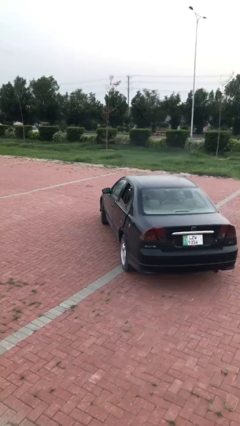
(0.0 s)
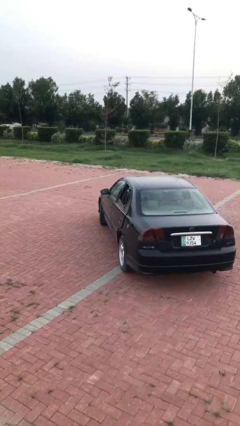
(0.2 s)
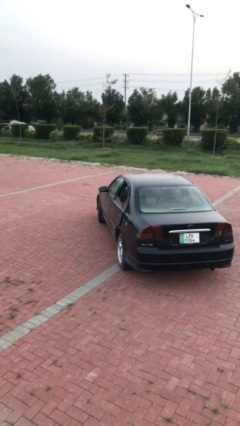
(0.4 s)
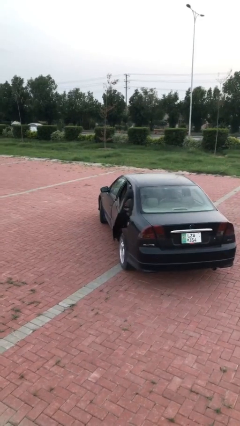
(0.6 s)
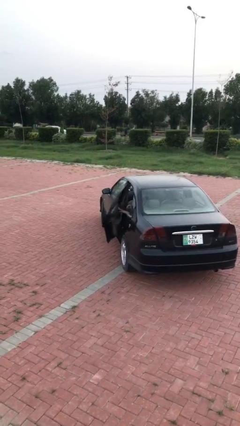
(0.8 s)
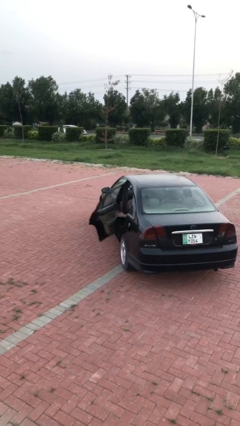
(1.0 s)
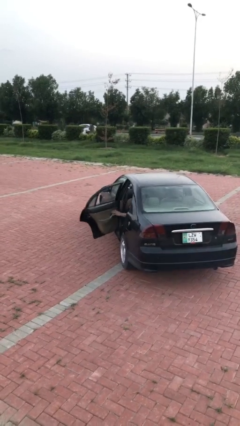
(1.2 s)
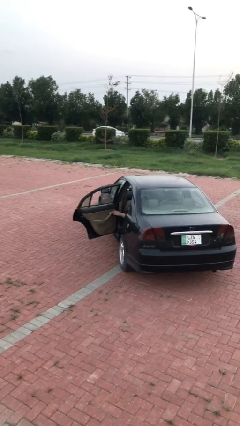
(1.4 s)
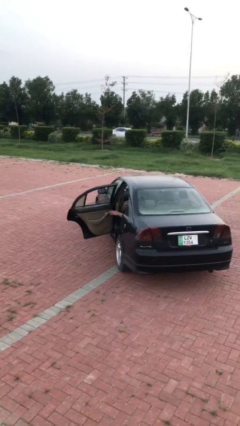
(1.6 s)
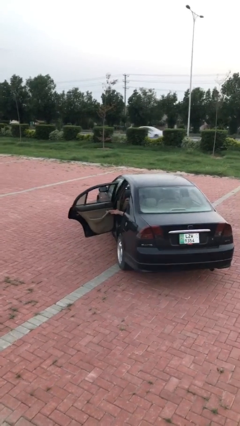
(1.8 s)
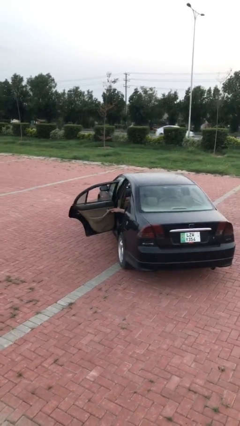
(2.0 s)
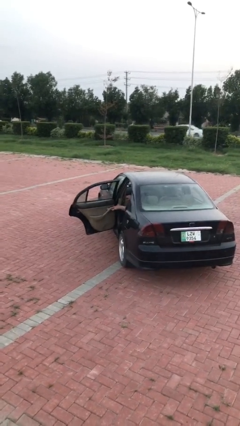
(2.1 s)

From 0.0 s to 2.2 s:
person opens car door

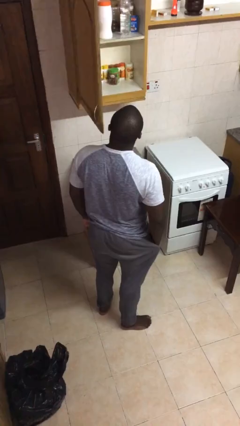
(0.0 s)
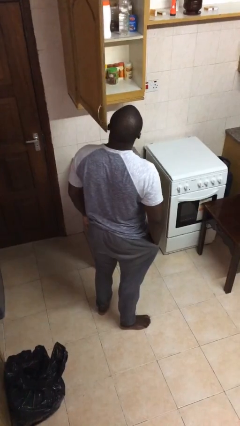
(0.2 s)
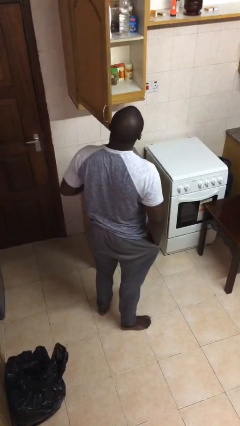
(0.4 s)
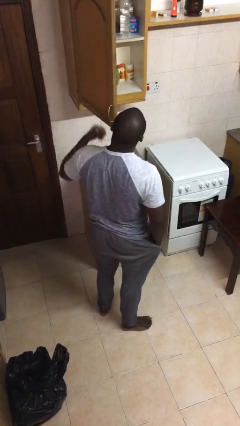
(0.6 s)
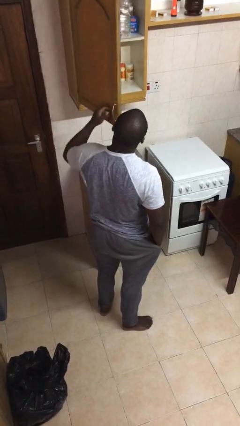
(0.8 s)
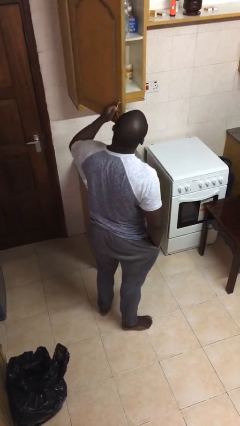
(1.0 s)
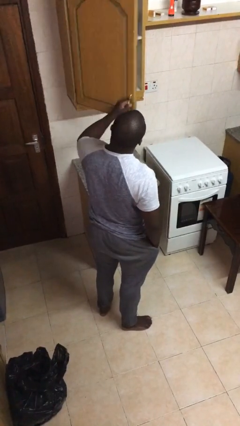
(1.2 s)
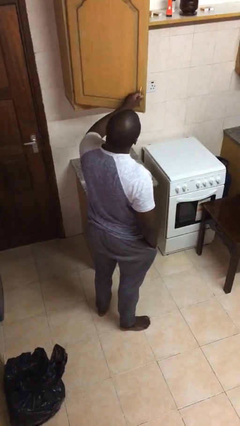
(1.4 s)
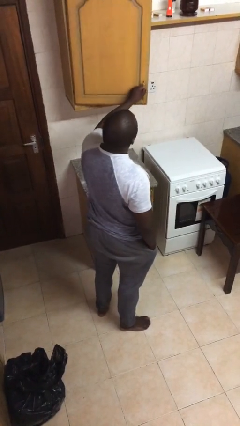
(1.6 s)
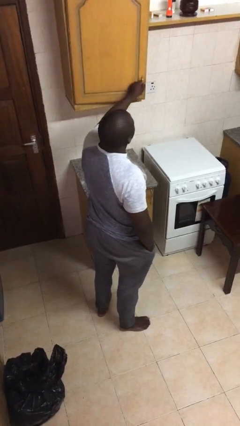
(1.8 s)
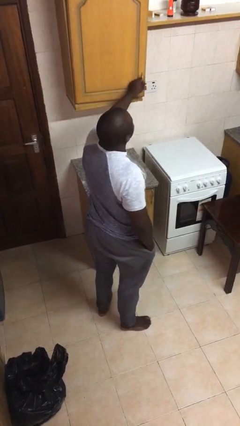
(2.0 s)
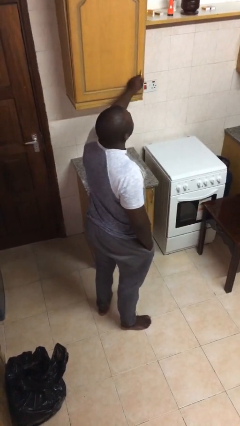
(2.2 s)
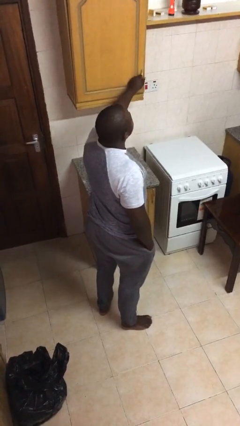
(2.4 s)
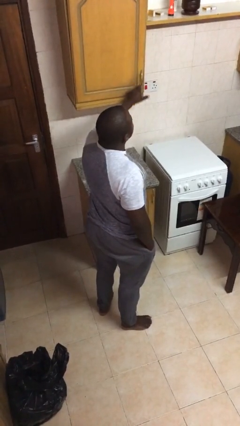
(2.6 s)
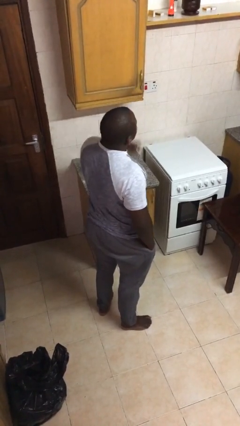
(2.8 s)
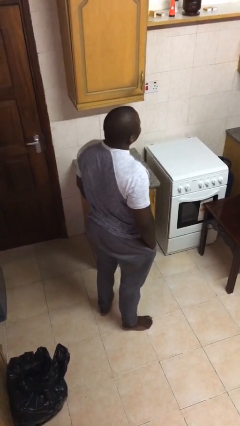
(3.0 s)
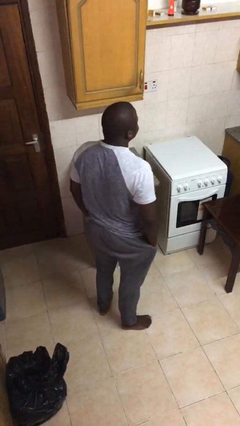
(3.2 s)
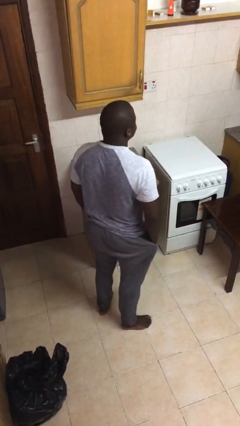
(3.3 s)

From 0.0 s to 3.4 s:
person closes cabinet

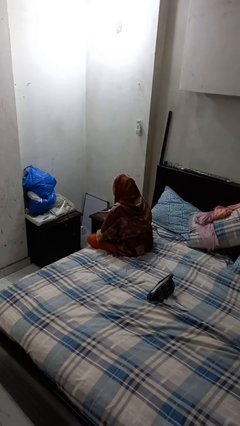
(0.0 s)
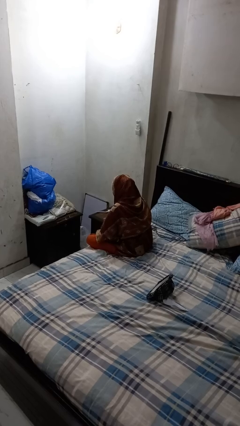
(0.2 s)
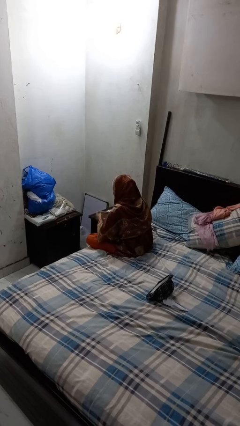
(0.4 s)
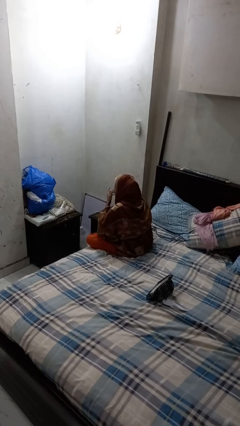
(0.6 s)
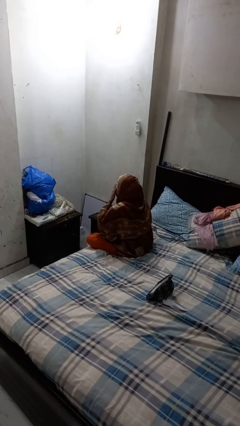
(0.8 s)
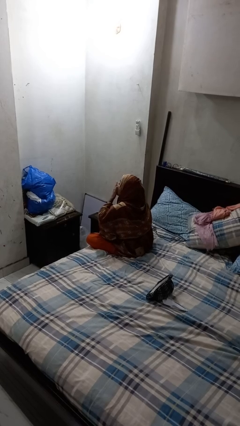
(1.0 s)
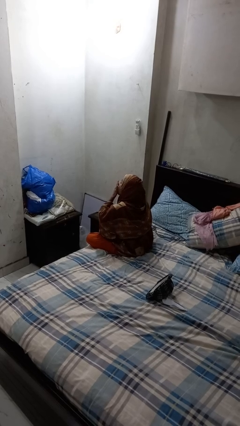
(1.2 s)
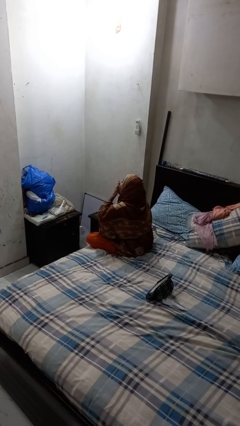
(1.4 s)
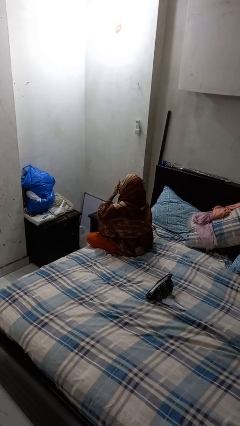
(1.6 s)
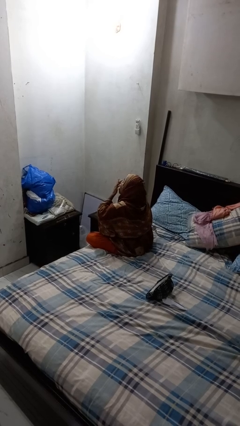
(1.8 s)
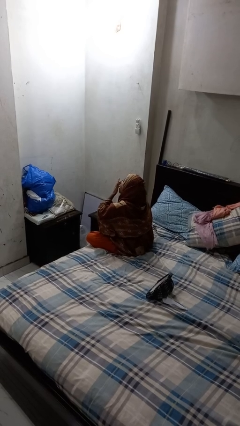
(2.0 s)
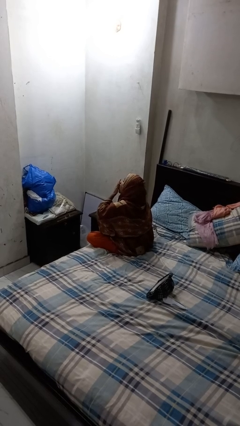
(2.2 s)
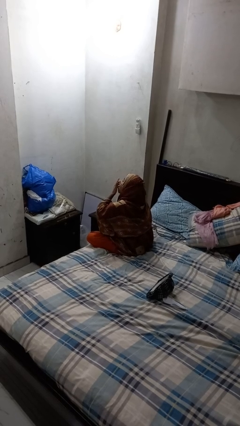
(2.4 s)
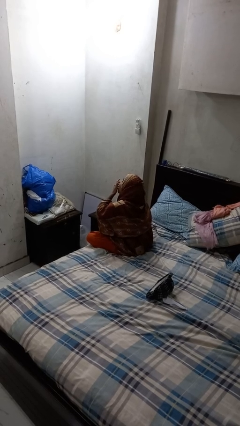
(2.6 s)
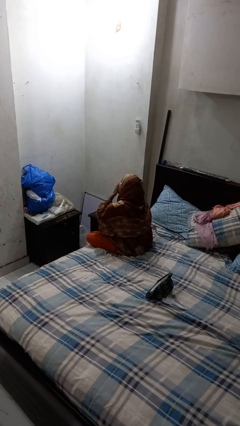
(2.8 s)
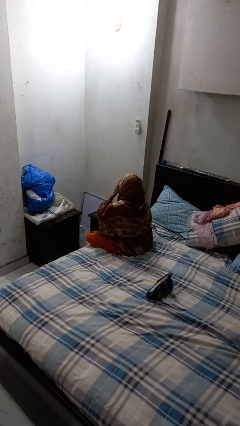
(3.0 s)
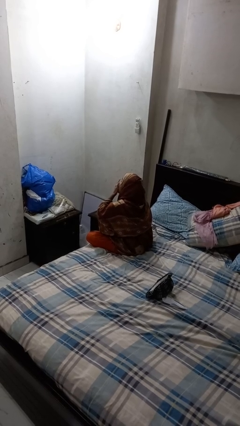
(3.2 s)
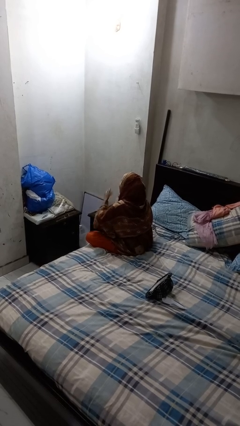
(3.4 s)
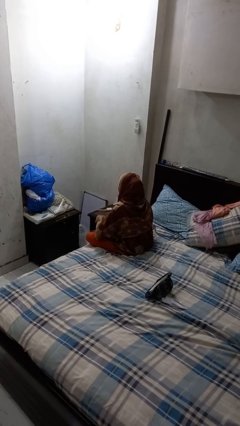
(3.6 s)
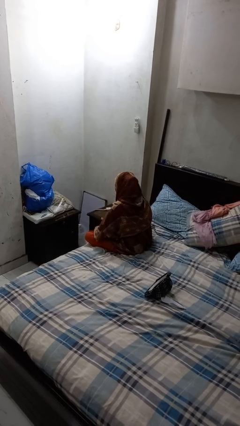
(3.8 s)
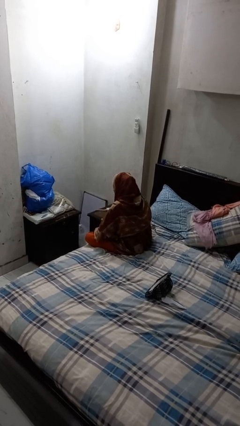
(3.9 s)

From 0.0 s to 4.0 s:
person yawns

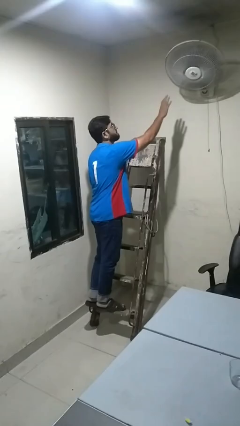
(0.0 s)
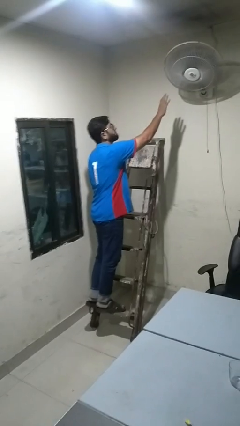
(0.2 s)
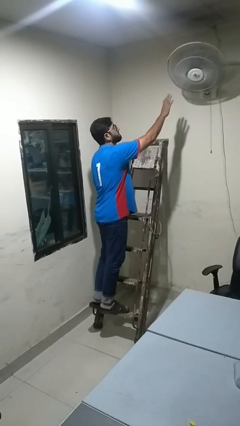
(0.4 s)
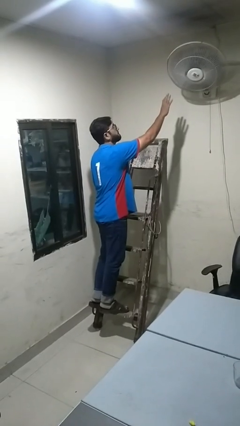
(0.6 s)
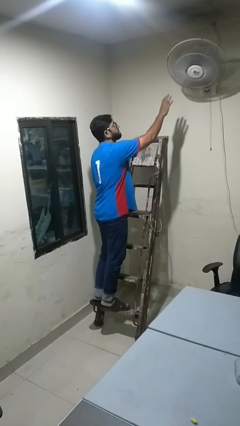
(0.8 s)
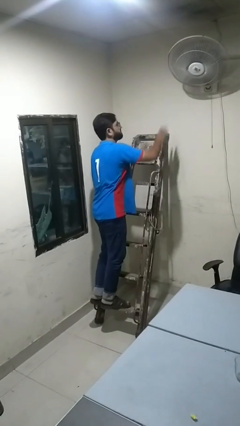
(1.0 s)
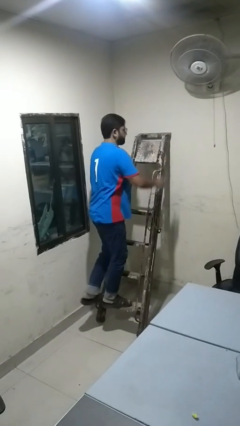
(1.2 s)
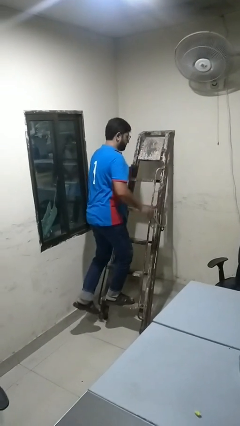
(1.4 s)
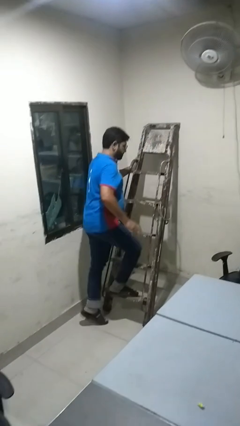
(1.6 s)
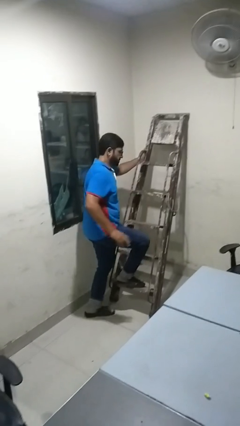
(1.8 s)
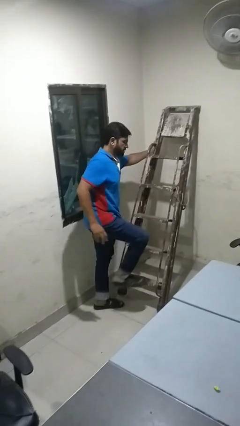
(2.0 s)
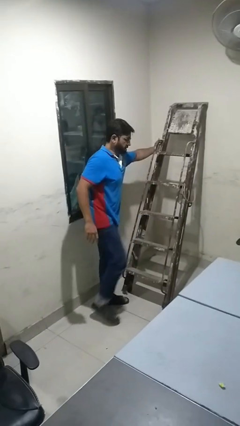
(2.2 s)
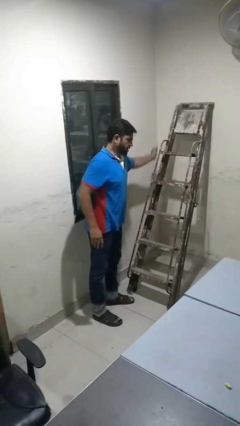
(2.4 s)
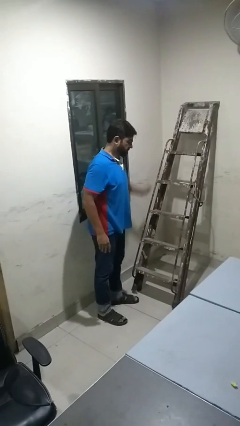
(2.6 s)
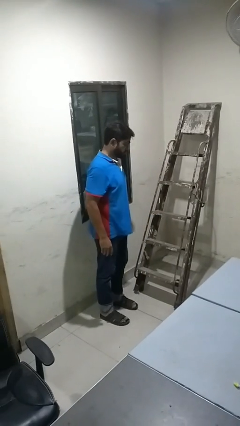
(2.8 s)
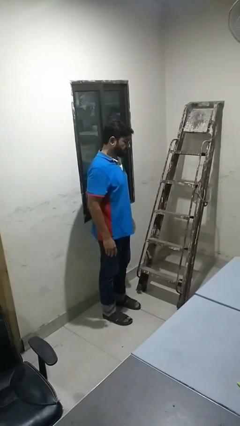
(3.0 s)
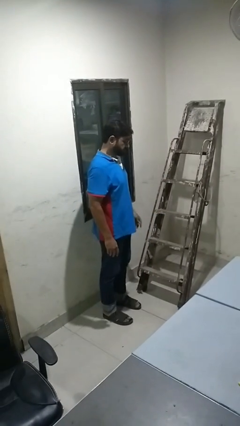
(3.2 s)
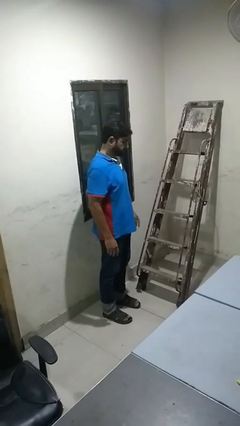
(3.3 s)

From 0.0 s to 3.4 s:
person climbs down ladder

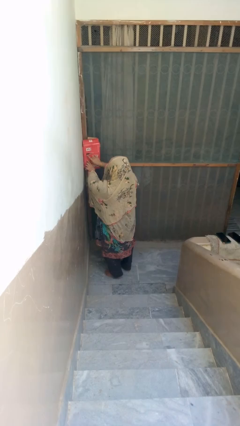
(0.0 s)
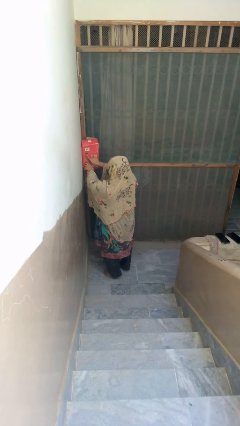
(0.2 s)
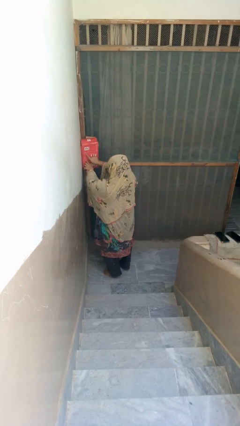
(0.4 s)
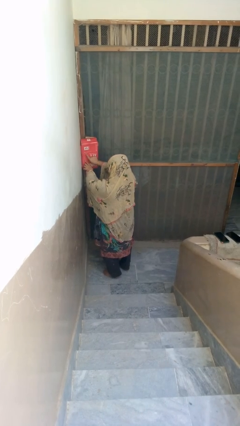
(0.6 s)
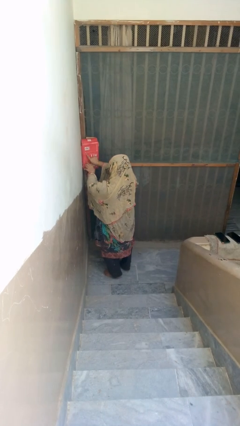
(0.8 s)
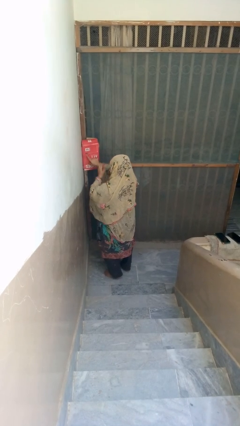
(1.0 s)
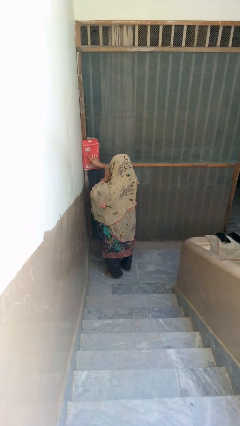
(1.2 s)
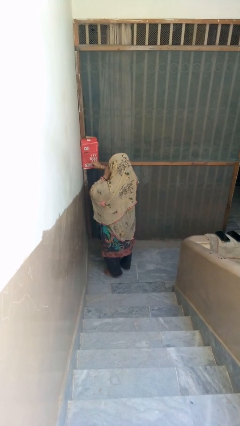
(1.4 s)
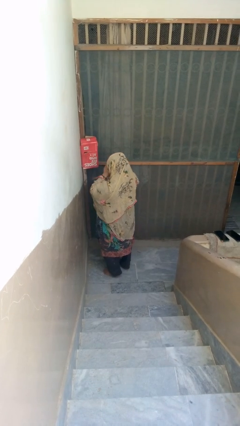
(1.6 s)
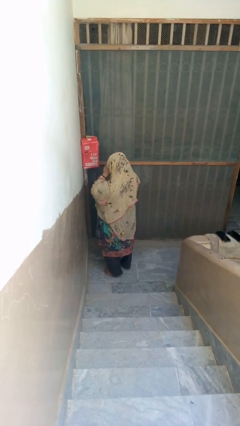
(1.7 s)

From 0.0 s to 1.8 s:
person closes mailbox

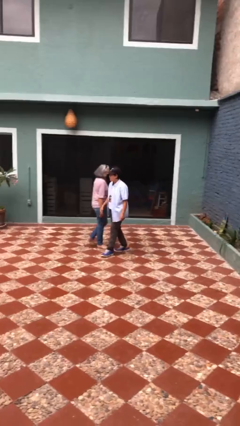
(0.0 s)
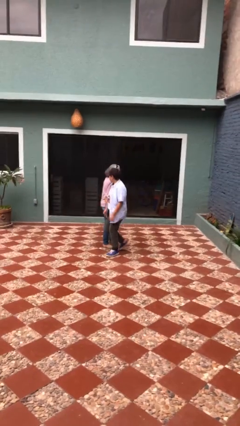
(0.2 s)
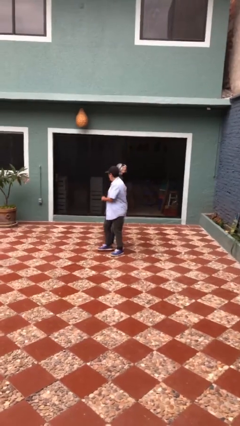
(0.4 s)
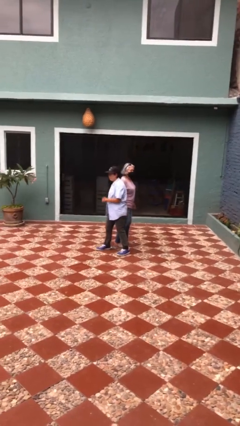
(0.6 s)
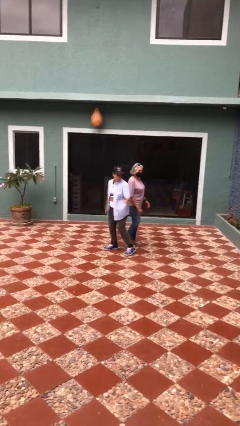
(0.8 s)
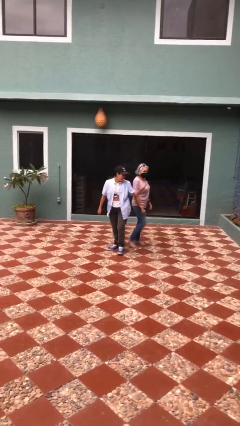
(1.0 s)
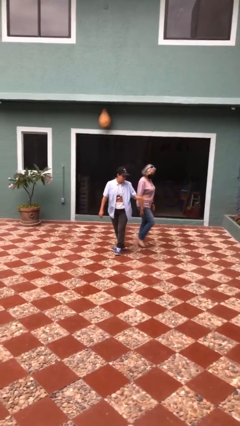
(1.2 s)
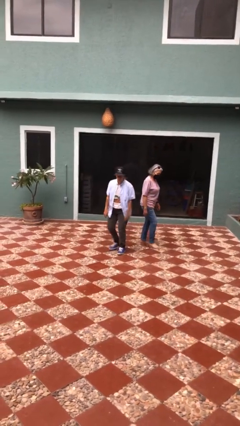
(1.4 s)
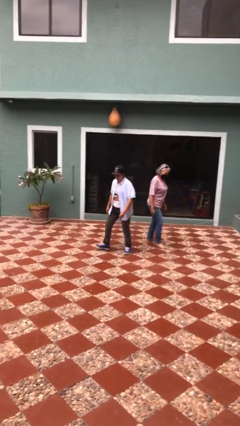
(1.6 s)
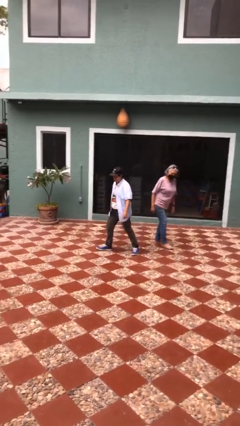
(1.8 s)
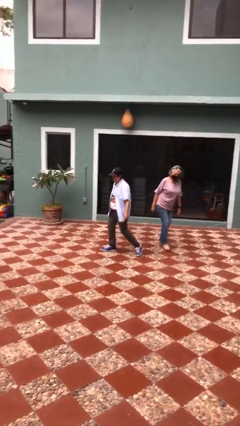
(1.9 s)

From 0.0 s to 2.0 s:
person bumps into person

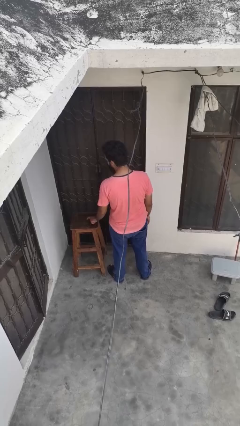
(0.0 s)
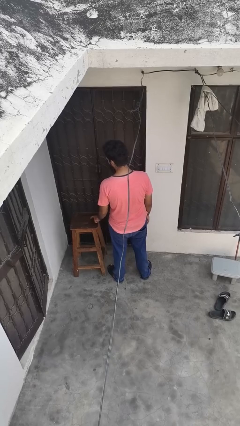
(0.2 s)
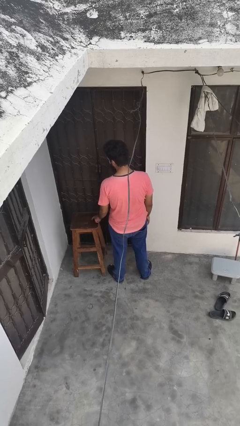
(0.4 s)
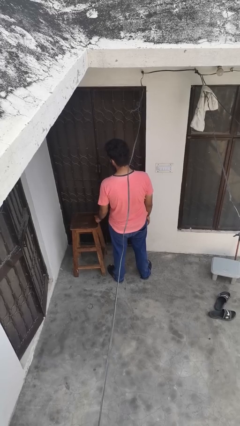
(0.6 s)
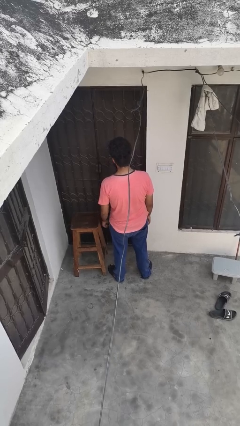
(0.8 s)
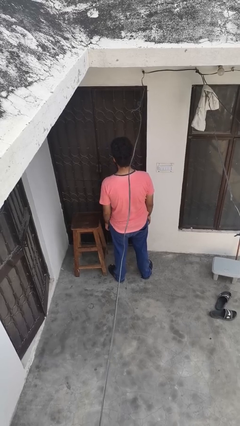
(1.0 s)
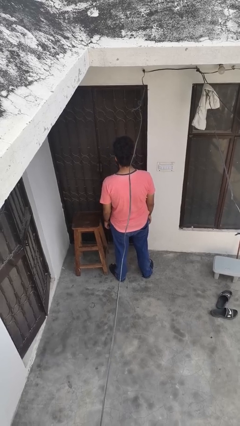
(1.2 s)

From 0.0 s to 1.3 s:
person taps object with finger
